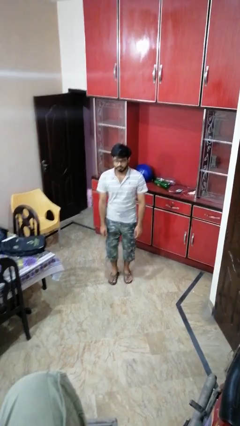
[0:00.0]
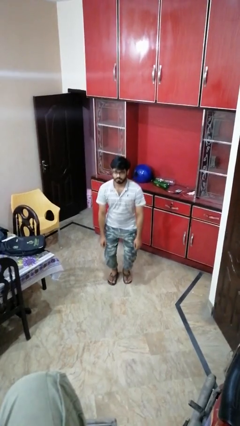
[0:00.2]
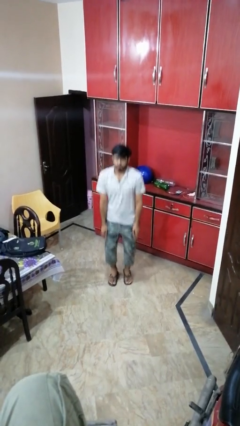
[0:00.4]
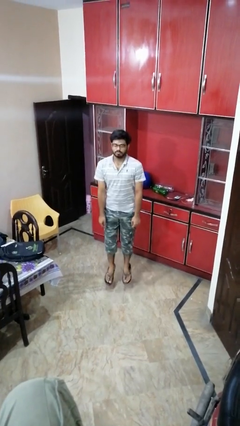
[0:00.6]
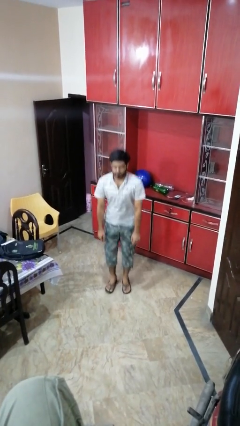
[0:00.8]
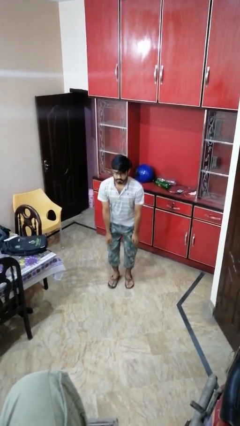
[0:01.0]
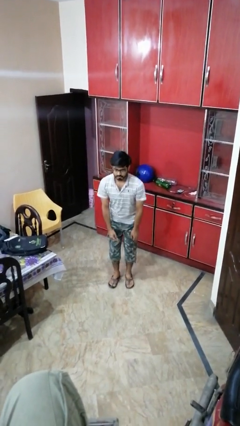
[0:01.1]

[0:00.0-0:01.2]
person jumps

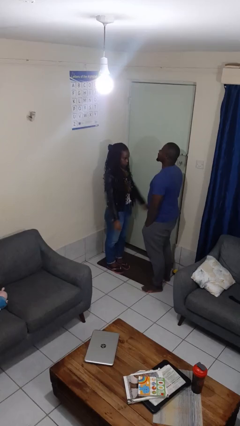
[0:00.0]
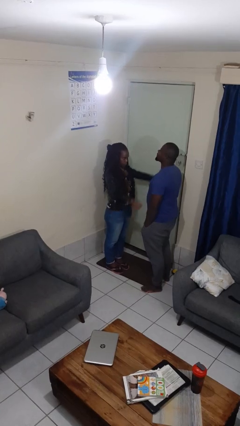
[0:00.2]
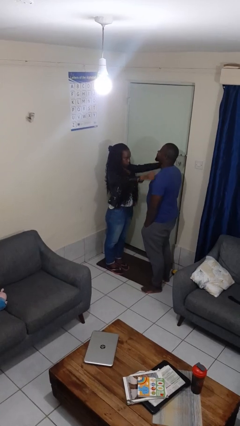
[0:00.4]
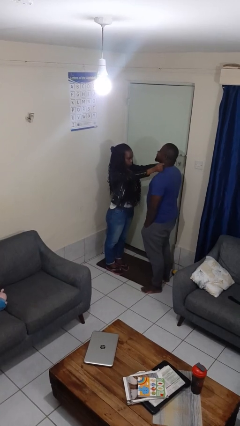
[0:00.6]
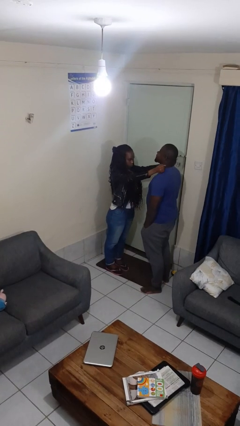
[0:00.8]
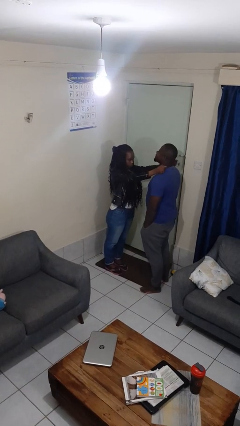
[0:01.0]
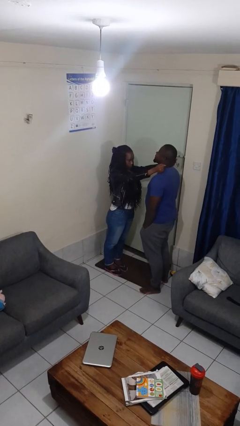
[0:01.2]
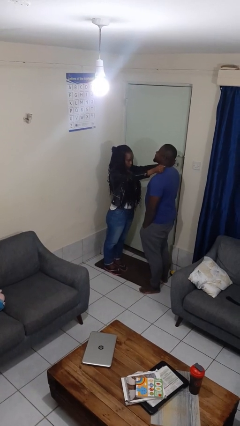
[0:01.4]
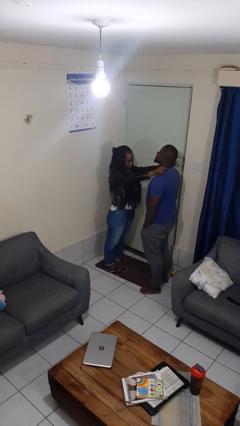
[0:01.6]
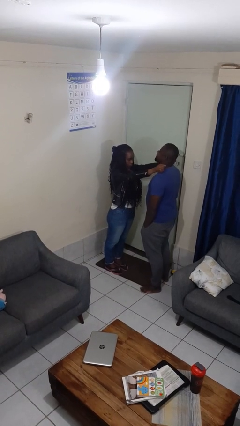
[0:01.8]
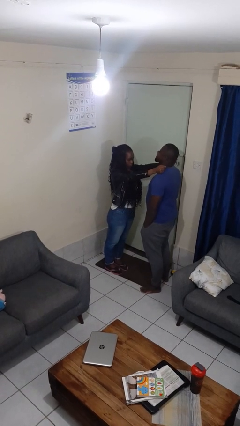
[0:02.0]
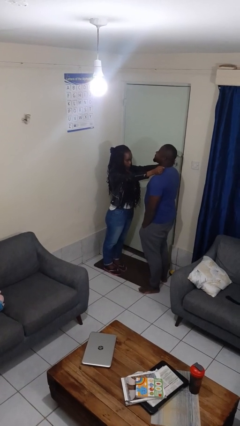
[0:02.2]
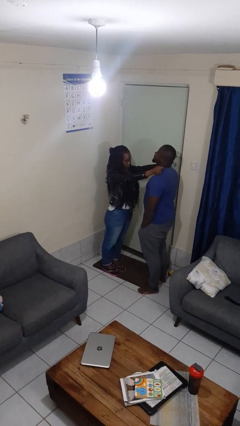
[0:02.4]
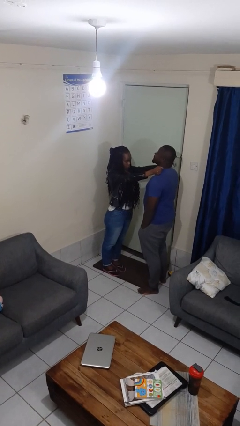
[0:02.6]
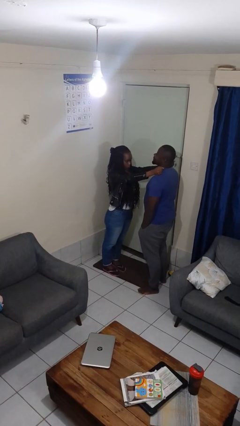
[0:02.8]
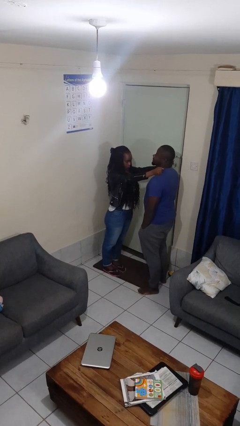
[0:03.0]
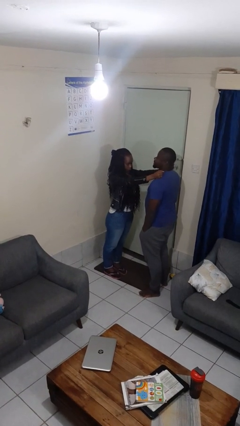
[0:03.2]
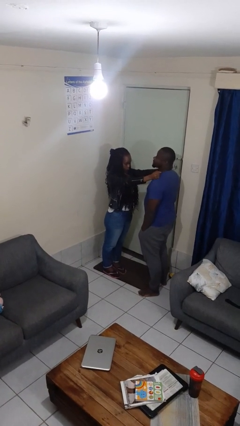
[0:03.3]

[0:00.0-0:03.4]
person pounds shoulders of person

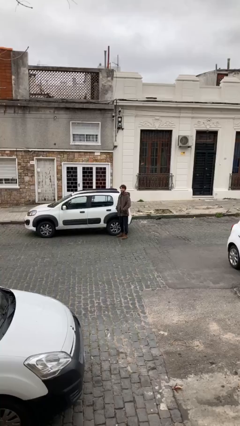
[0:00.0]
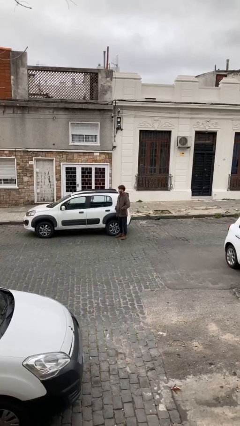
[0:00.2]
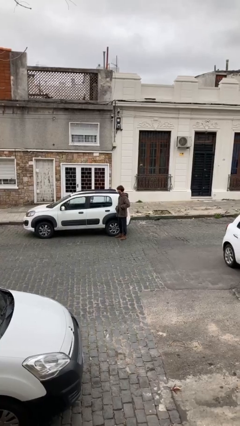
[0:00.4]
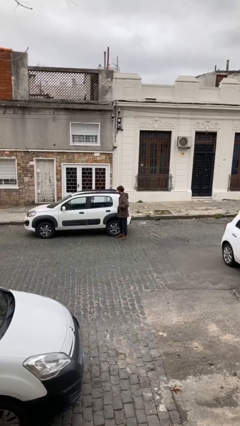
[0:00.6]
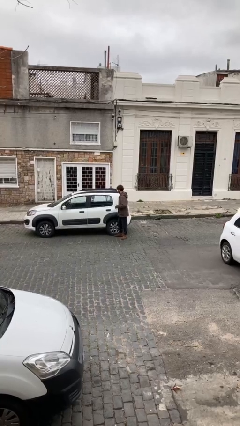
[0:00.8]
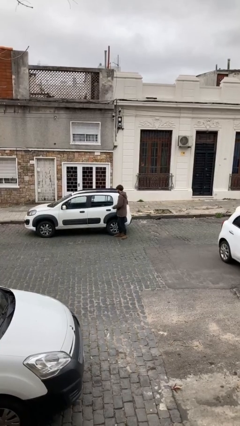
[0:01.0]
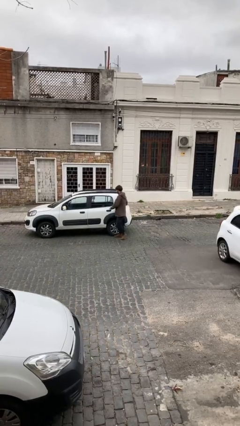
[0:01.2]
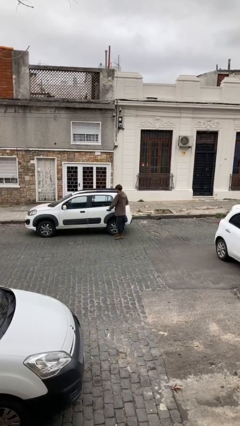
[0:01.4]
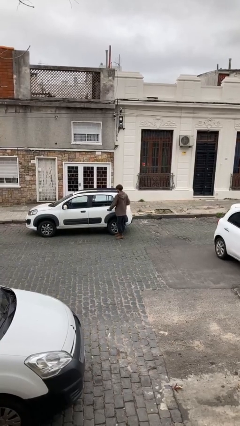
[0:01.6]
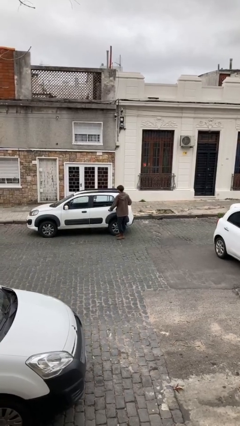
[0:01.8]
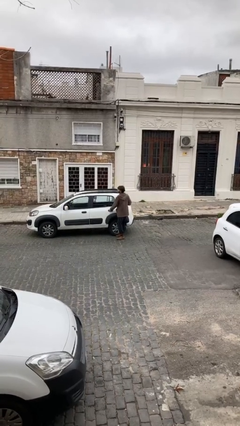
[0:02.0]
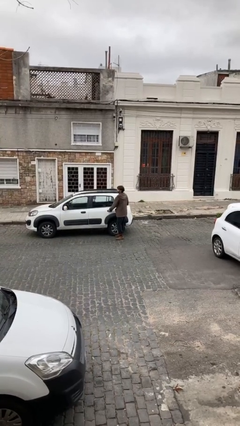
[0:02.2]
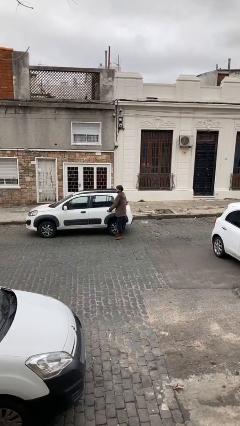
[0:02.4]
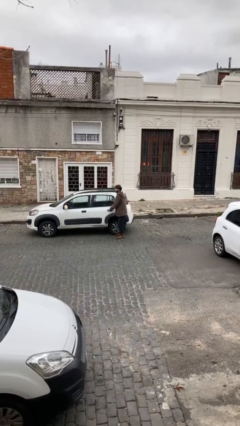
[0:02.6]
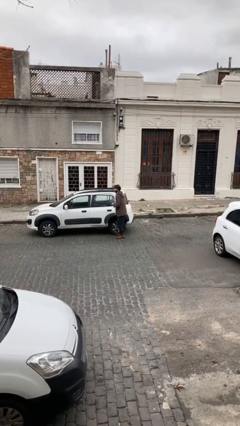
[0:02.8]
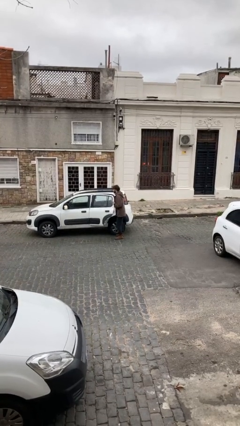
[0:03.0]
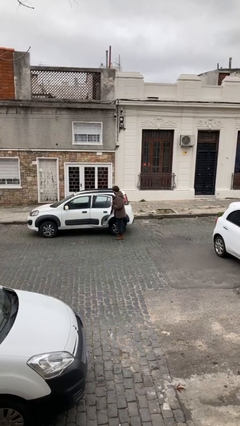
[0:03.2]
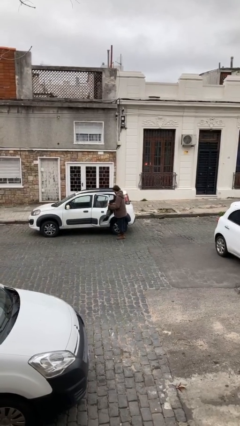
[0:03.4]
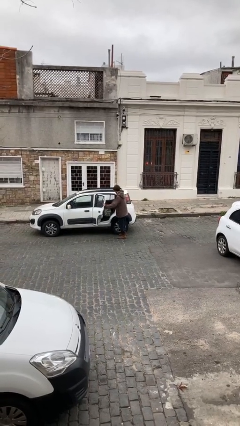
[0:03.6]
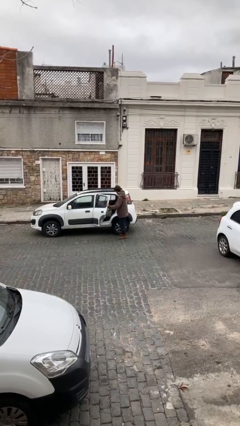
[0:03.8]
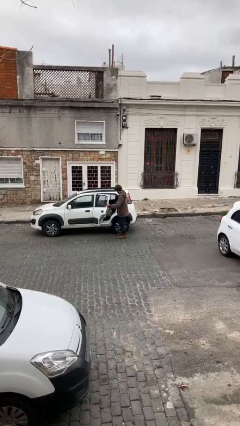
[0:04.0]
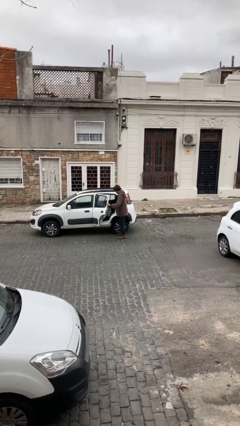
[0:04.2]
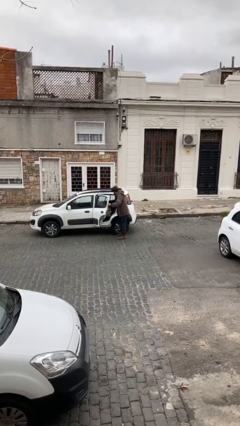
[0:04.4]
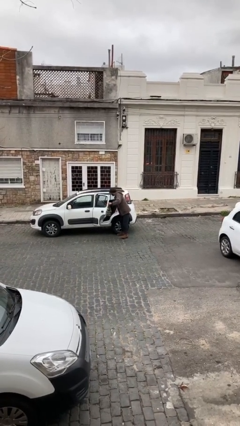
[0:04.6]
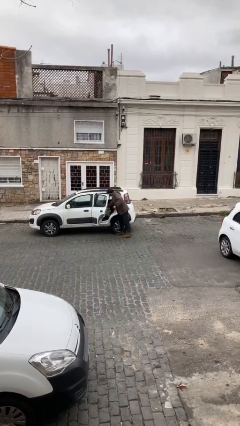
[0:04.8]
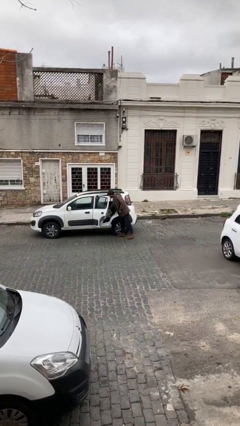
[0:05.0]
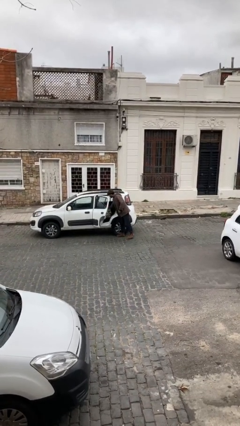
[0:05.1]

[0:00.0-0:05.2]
person opens car door

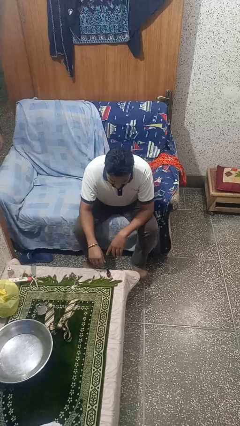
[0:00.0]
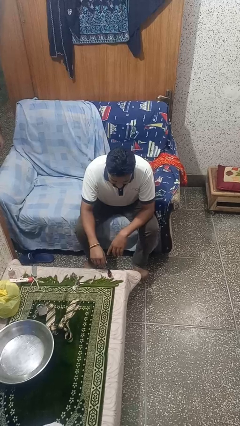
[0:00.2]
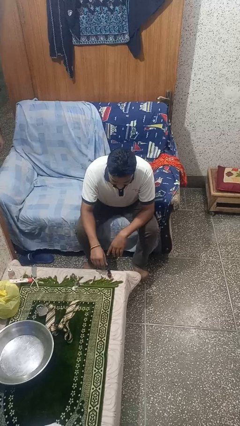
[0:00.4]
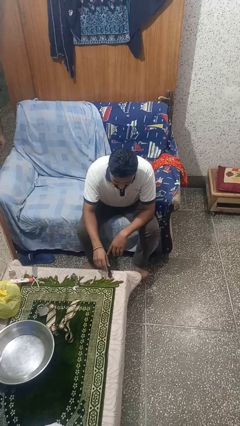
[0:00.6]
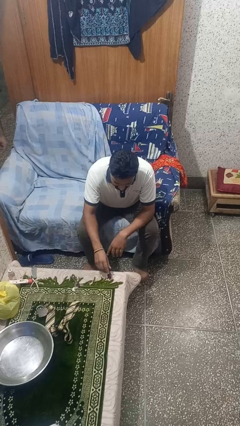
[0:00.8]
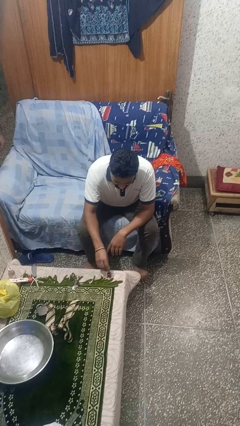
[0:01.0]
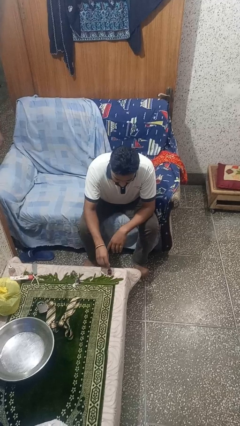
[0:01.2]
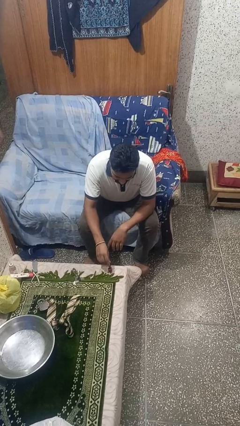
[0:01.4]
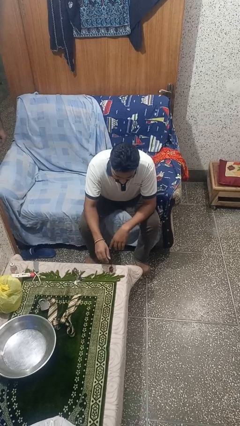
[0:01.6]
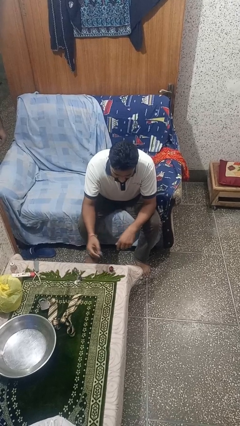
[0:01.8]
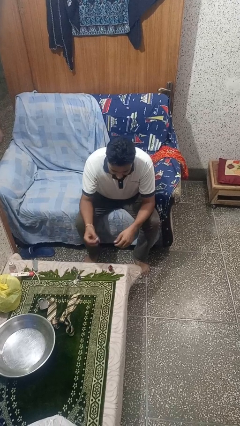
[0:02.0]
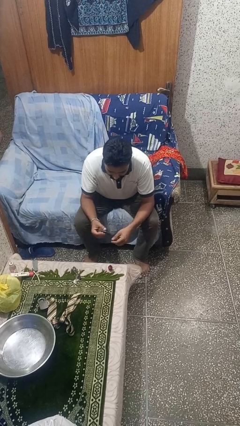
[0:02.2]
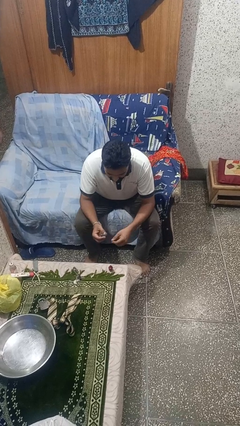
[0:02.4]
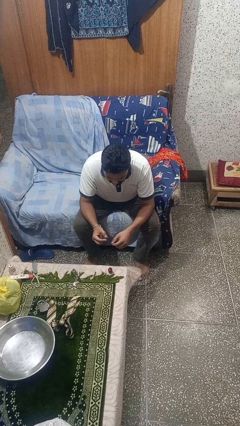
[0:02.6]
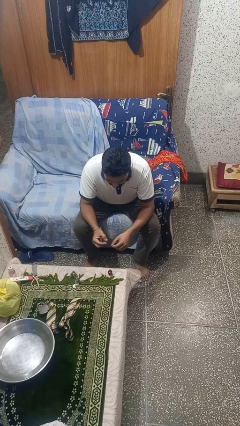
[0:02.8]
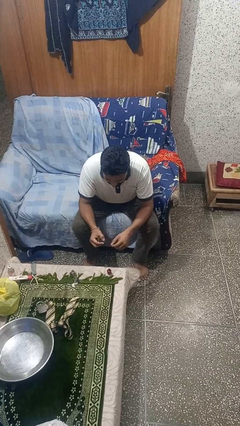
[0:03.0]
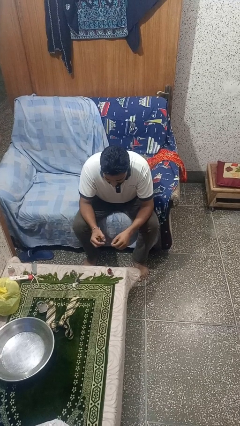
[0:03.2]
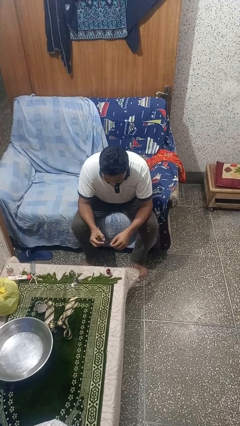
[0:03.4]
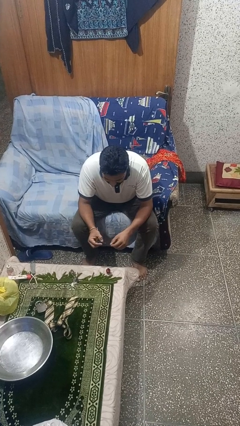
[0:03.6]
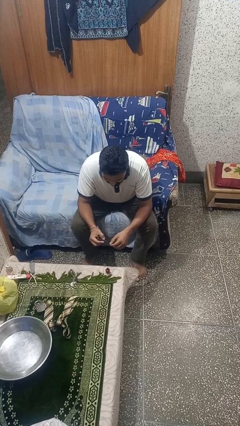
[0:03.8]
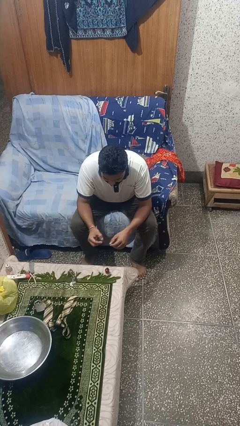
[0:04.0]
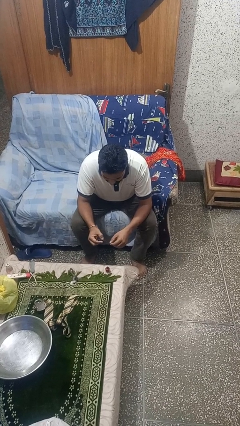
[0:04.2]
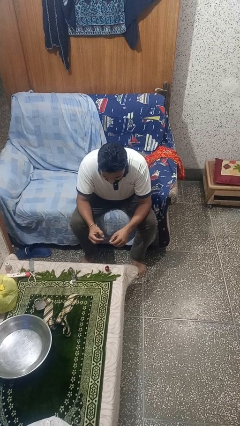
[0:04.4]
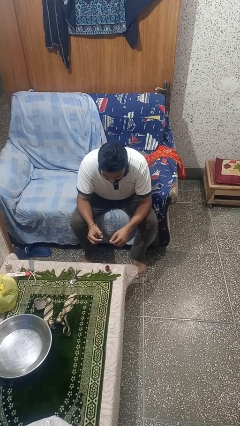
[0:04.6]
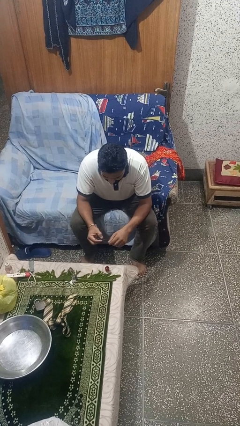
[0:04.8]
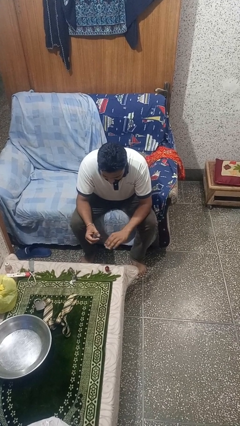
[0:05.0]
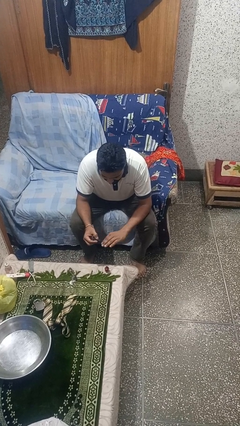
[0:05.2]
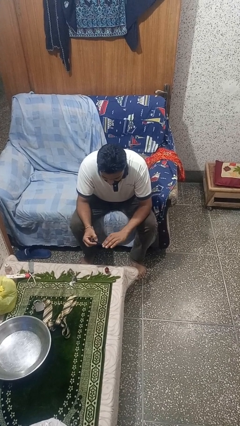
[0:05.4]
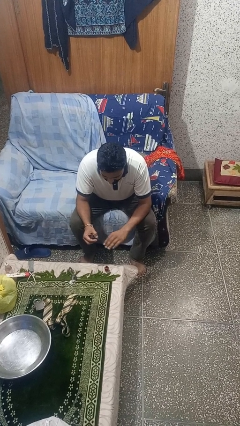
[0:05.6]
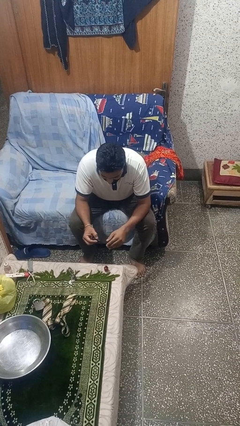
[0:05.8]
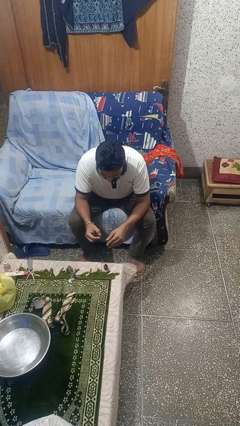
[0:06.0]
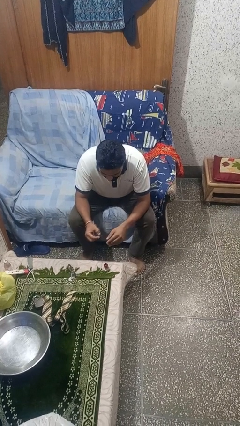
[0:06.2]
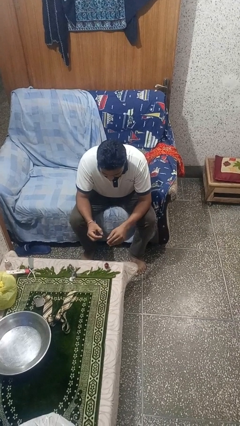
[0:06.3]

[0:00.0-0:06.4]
person paints fingernails

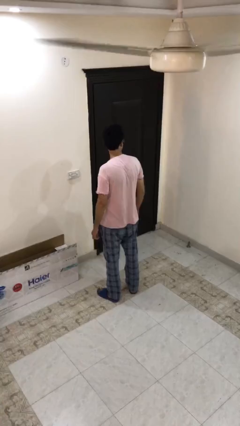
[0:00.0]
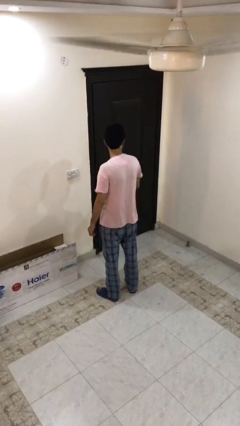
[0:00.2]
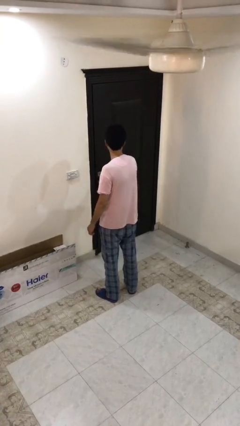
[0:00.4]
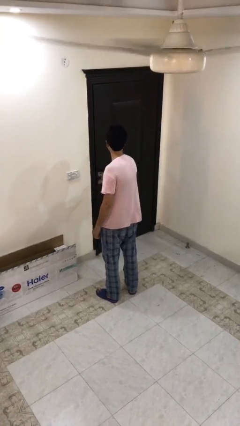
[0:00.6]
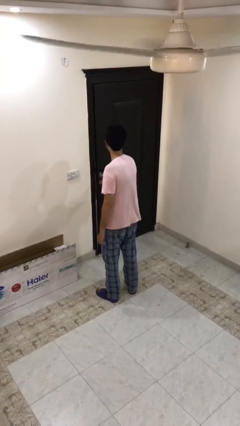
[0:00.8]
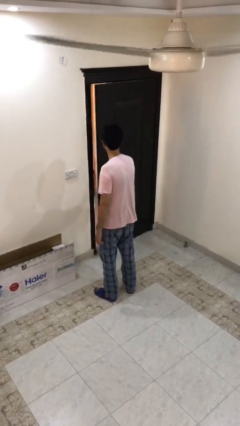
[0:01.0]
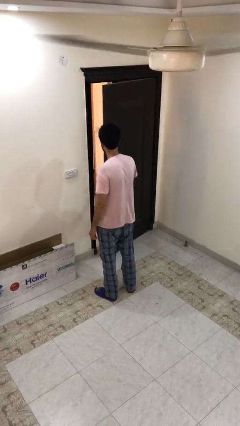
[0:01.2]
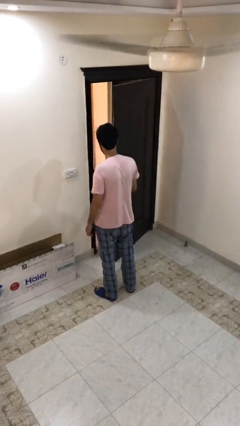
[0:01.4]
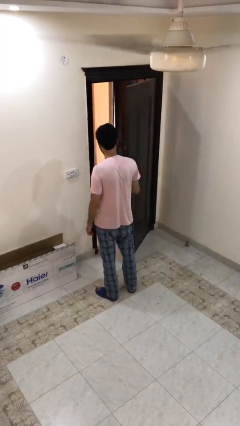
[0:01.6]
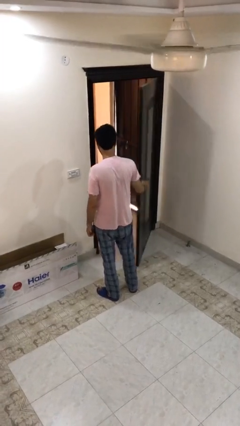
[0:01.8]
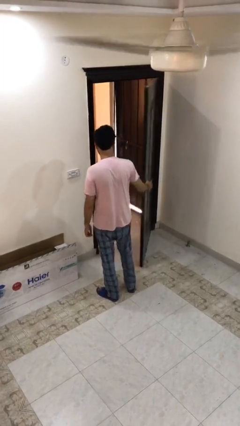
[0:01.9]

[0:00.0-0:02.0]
person opens facility door
